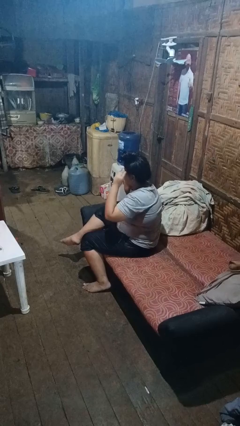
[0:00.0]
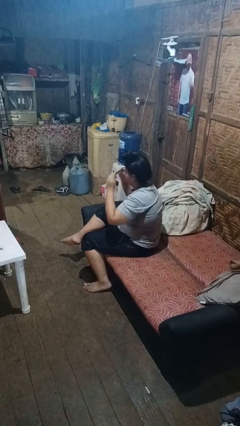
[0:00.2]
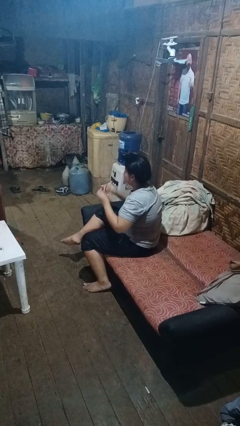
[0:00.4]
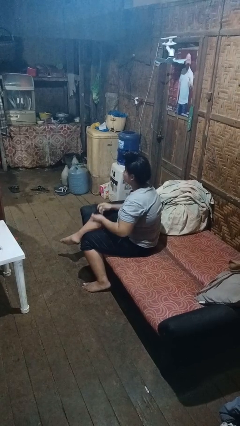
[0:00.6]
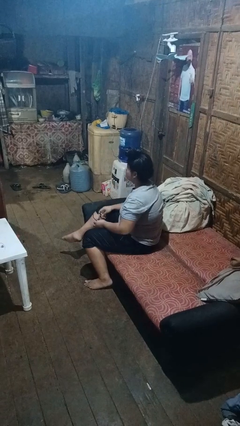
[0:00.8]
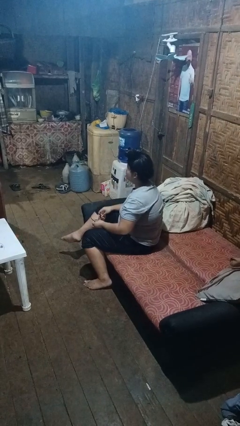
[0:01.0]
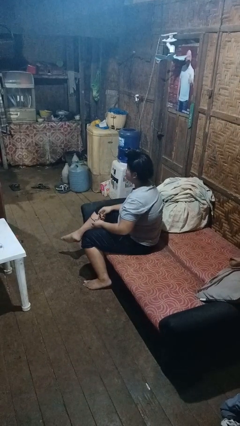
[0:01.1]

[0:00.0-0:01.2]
person takes off glasses

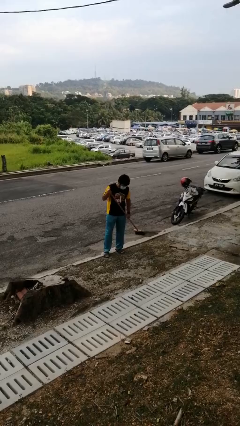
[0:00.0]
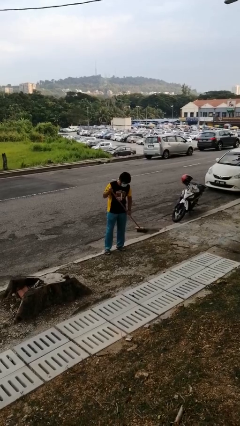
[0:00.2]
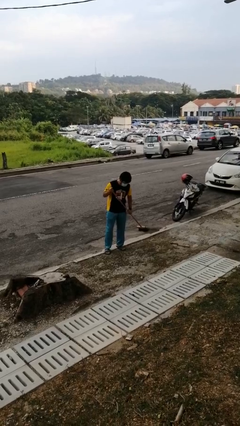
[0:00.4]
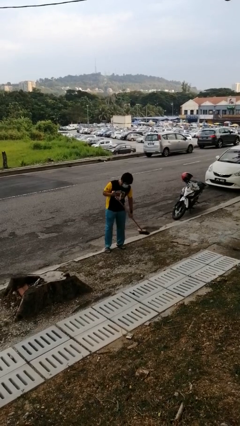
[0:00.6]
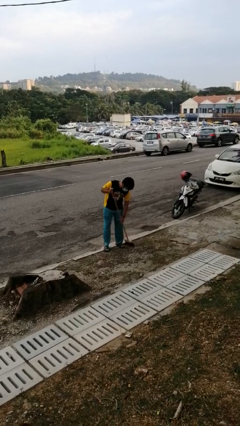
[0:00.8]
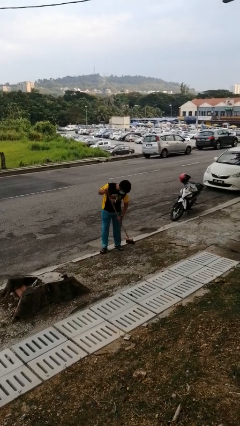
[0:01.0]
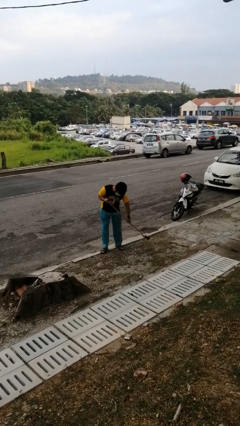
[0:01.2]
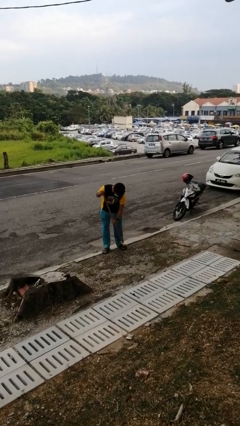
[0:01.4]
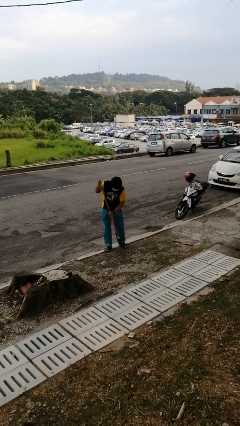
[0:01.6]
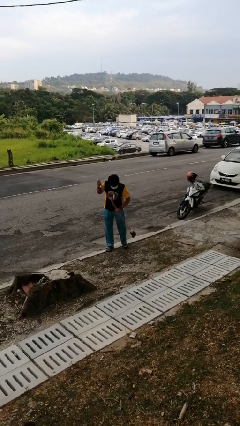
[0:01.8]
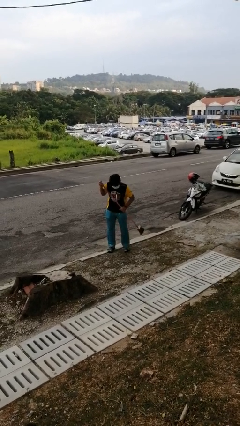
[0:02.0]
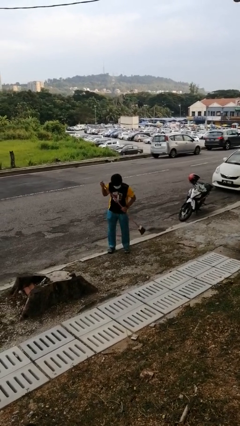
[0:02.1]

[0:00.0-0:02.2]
person sweeps floor

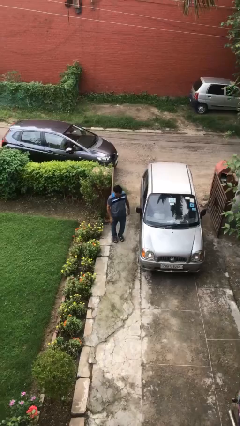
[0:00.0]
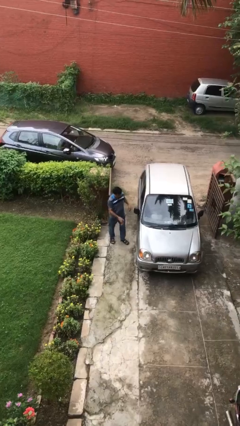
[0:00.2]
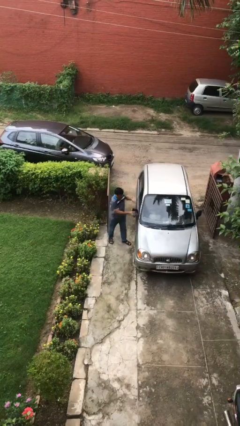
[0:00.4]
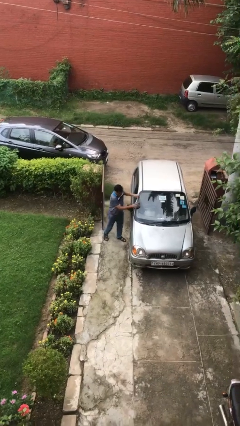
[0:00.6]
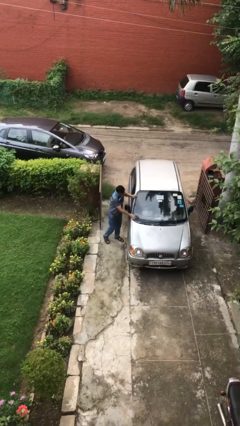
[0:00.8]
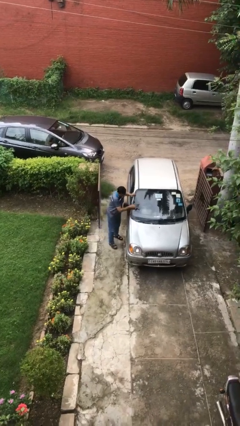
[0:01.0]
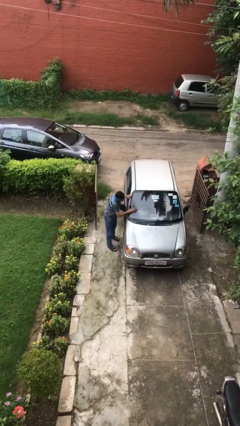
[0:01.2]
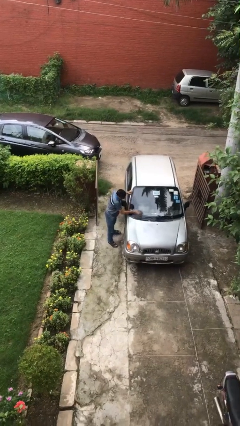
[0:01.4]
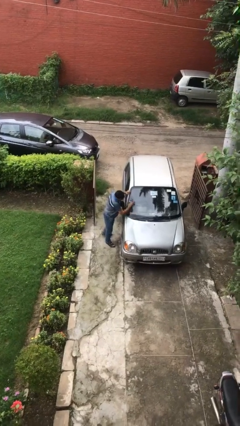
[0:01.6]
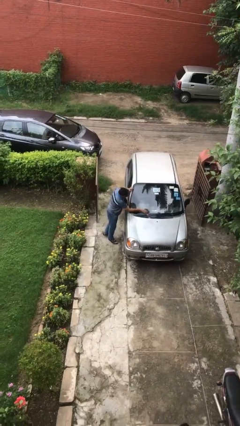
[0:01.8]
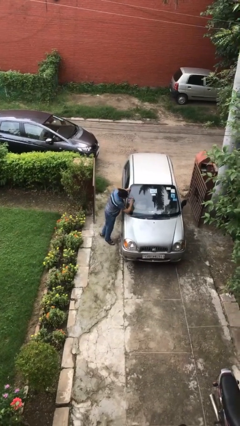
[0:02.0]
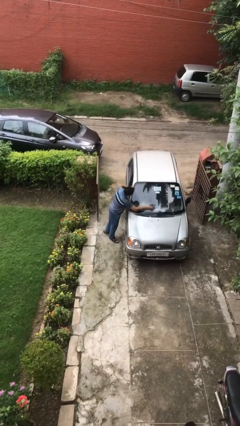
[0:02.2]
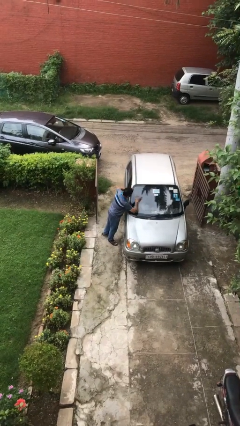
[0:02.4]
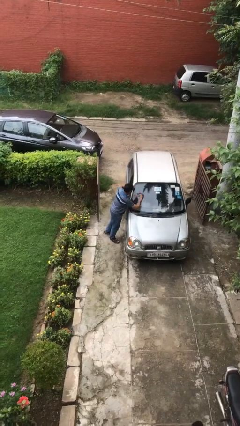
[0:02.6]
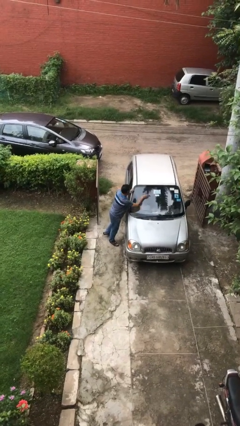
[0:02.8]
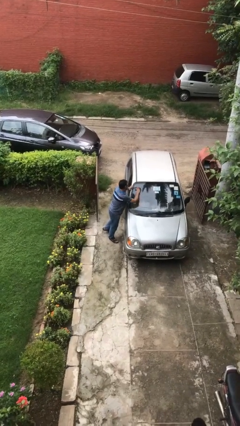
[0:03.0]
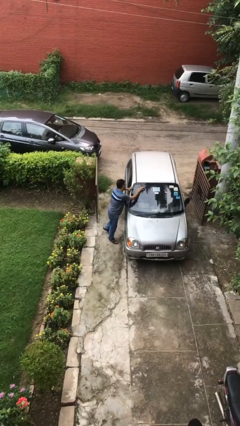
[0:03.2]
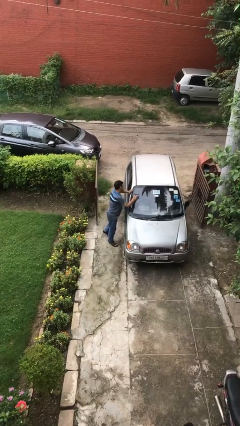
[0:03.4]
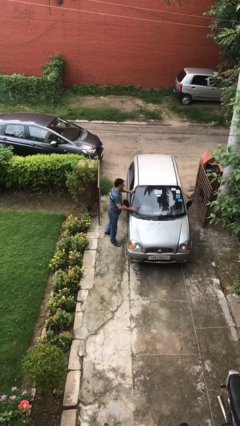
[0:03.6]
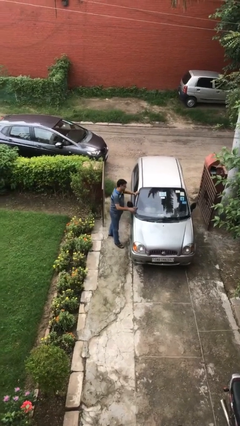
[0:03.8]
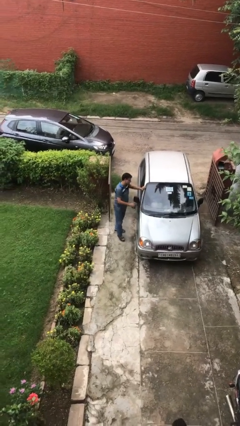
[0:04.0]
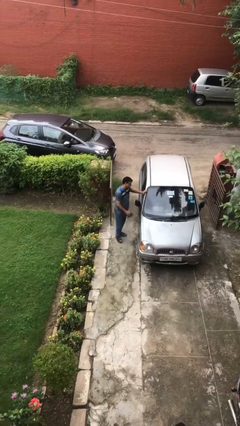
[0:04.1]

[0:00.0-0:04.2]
person polishes car with rag

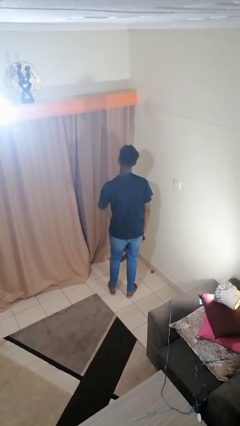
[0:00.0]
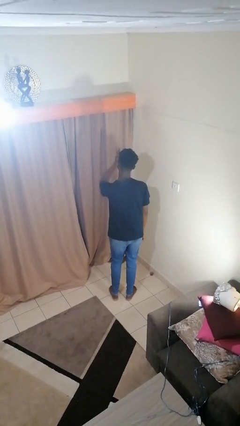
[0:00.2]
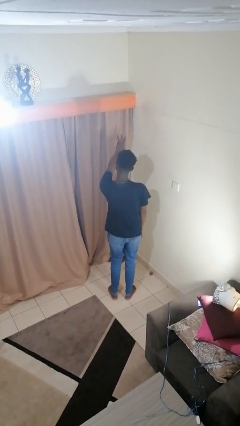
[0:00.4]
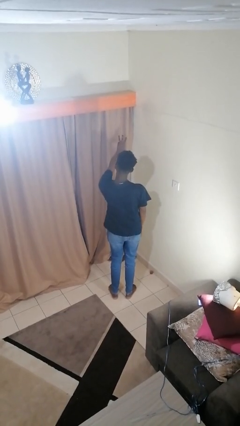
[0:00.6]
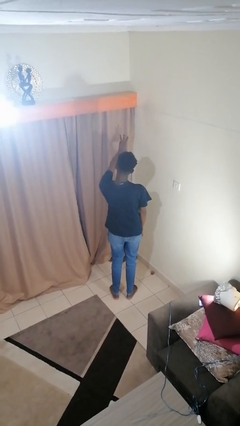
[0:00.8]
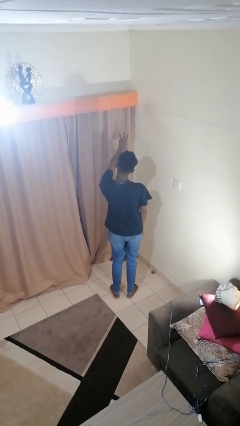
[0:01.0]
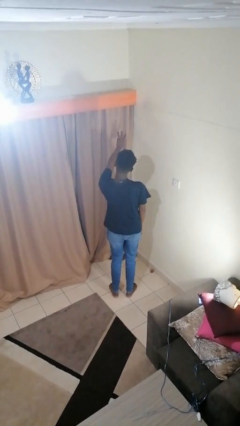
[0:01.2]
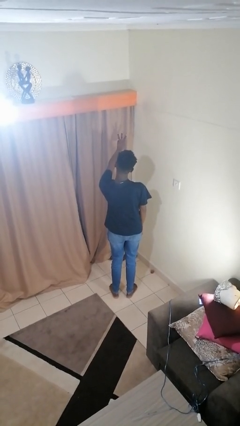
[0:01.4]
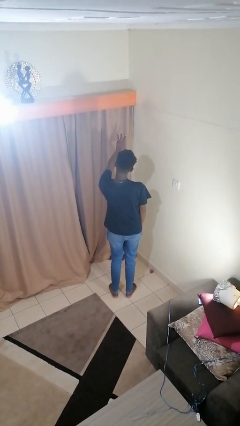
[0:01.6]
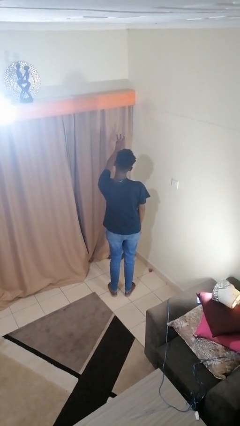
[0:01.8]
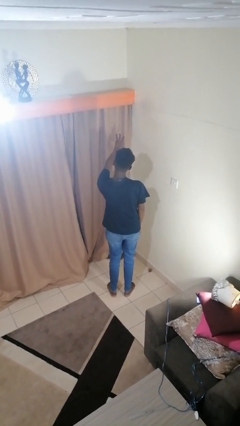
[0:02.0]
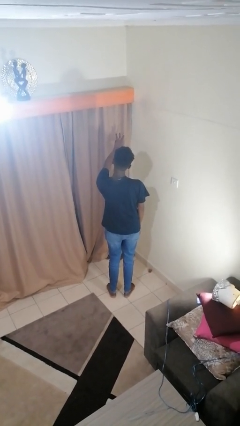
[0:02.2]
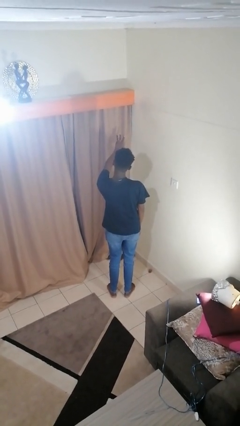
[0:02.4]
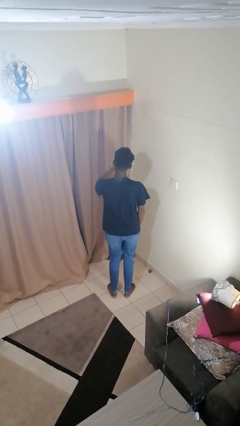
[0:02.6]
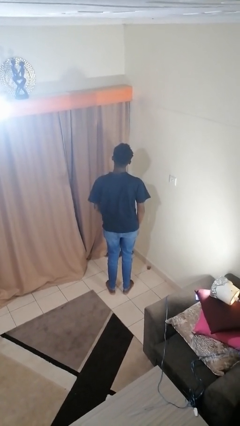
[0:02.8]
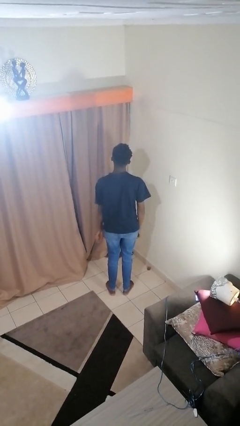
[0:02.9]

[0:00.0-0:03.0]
person gestures number three

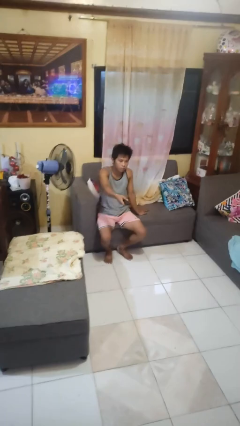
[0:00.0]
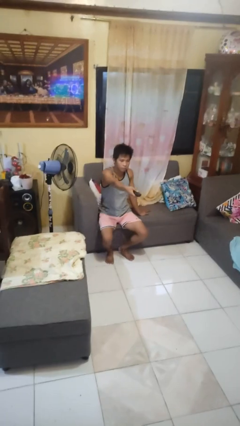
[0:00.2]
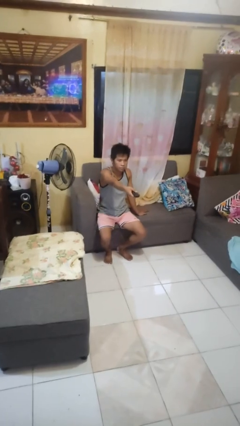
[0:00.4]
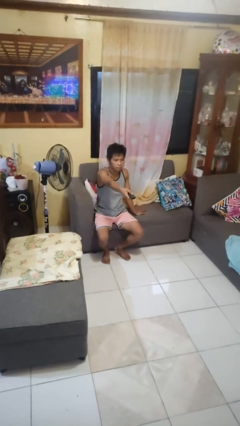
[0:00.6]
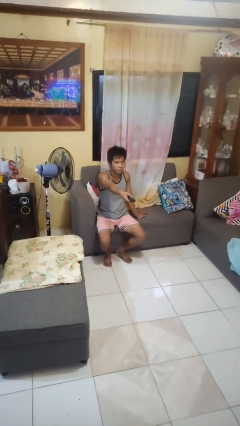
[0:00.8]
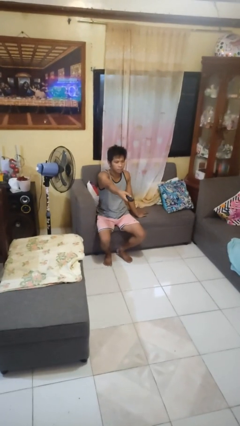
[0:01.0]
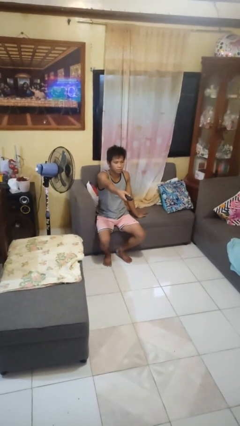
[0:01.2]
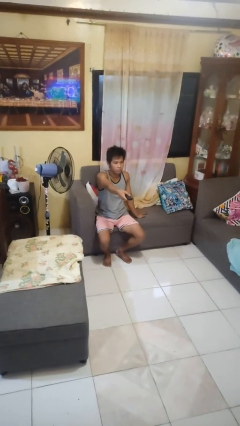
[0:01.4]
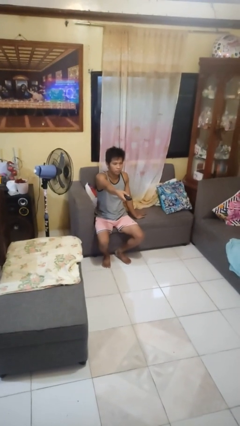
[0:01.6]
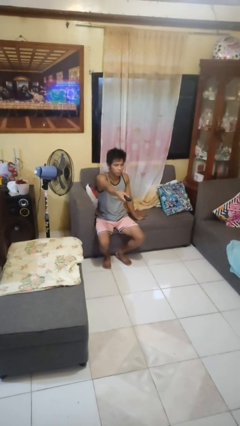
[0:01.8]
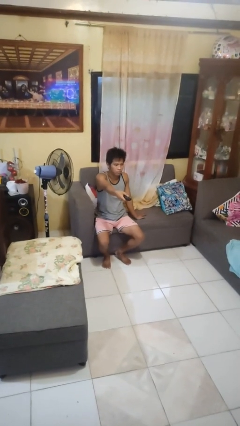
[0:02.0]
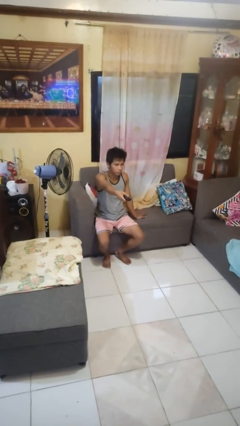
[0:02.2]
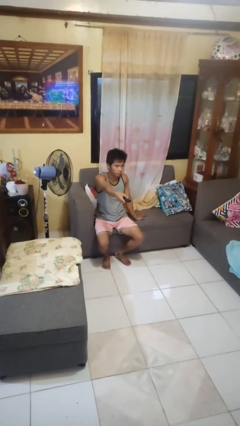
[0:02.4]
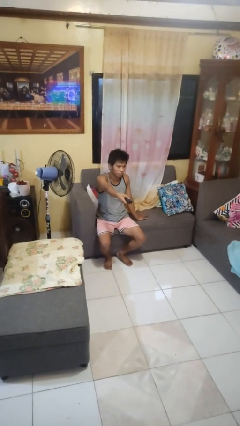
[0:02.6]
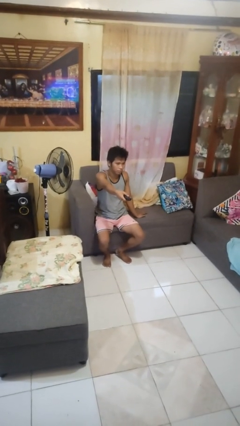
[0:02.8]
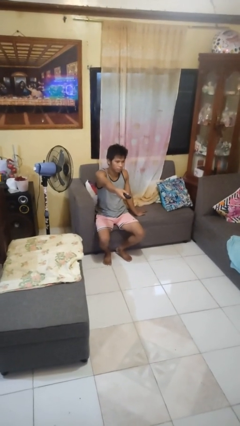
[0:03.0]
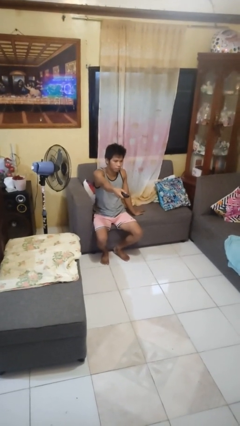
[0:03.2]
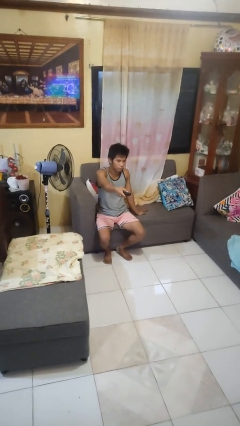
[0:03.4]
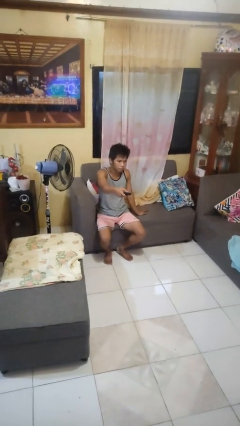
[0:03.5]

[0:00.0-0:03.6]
person uses television remote

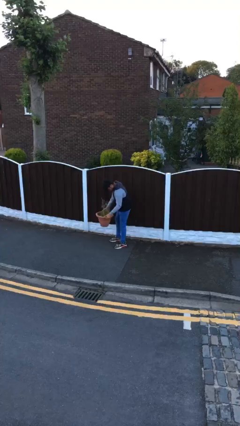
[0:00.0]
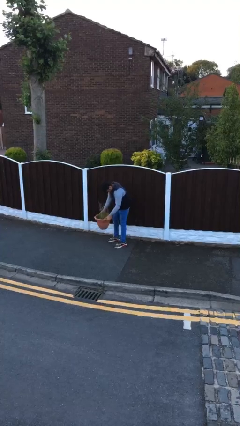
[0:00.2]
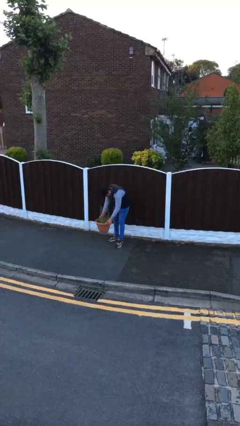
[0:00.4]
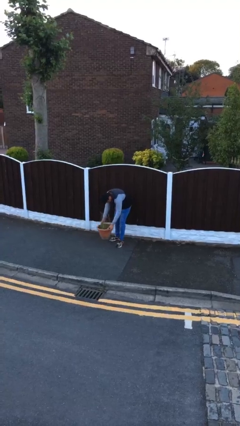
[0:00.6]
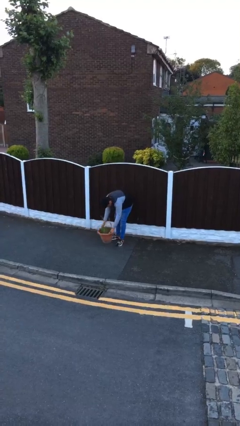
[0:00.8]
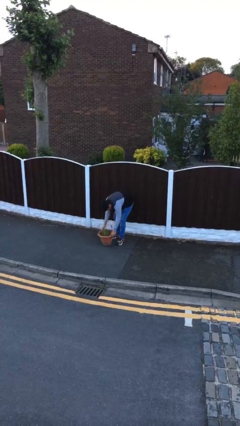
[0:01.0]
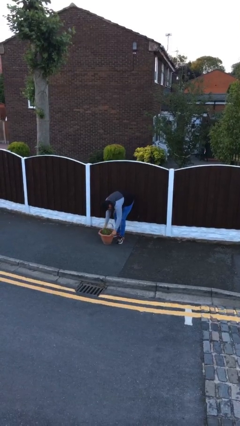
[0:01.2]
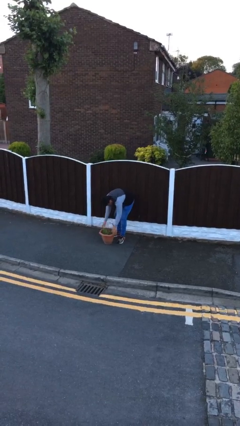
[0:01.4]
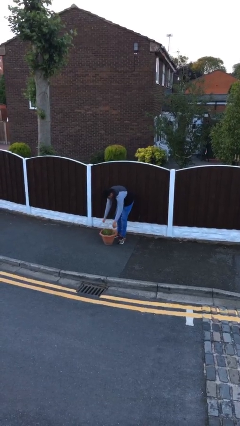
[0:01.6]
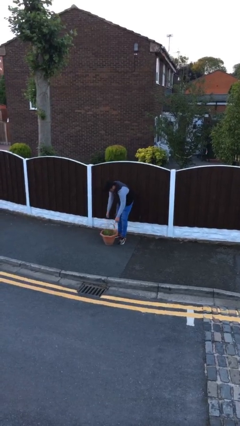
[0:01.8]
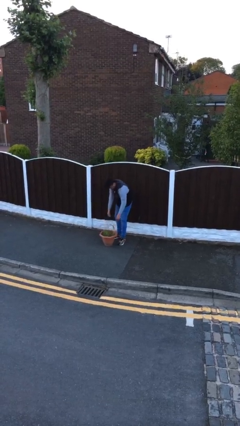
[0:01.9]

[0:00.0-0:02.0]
person puts down object on floor

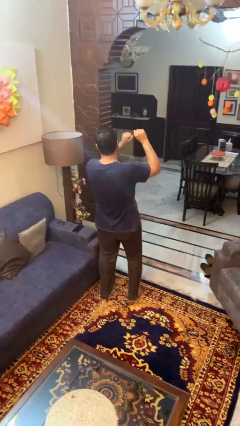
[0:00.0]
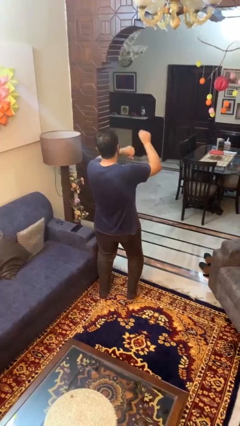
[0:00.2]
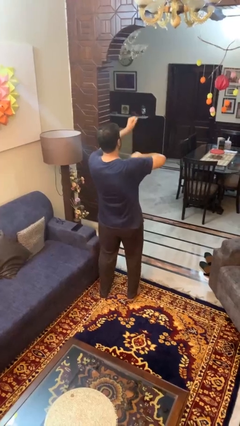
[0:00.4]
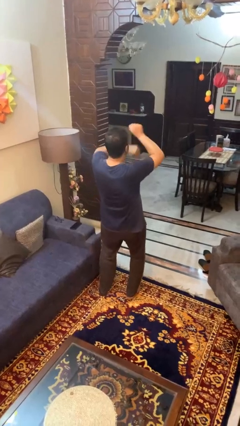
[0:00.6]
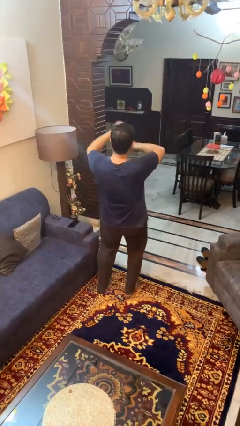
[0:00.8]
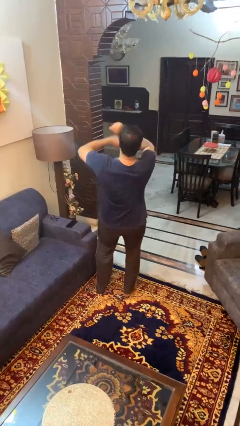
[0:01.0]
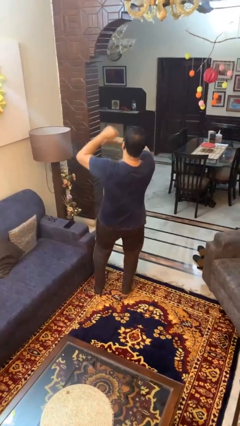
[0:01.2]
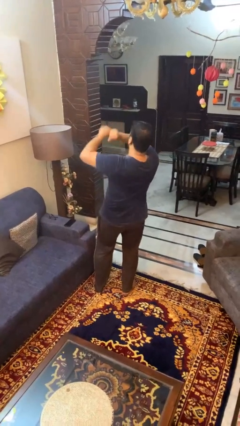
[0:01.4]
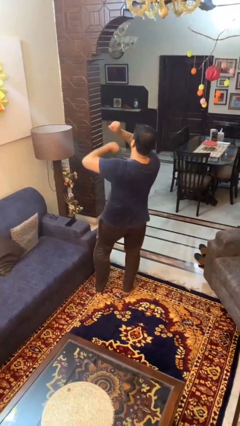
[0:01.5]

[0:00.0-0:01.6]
person dances in place
